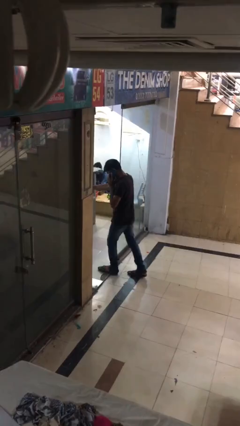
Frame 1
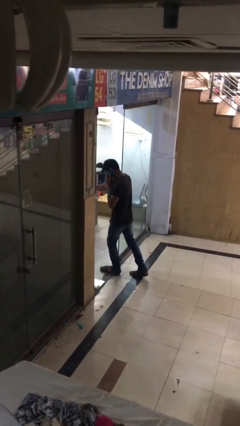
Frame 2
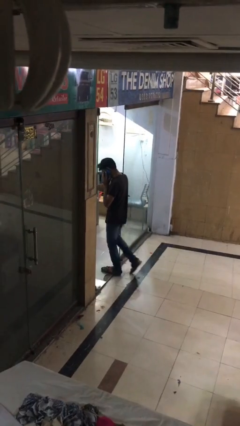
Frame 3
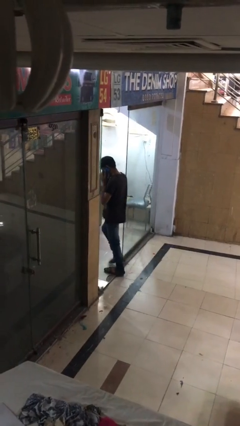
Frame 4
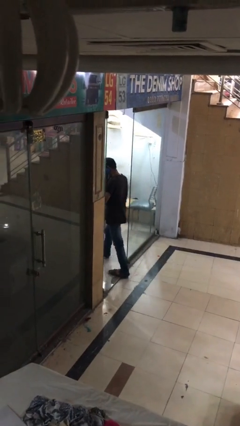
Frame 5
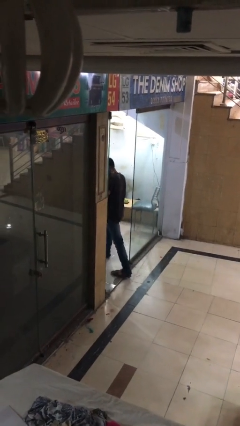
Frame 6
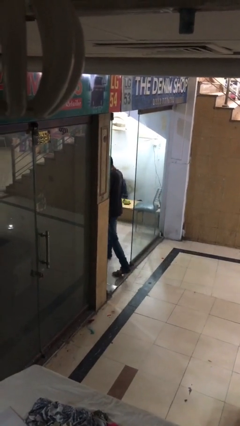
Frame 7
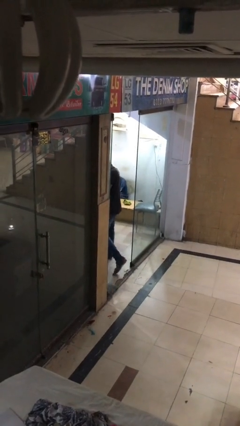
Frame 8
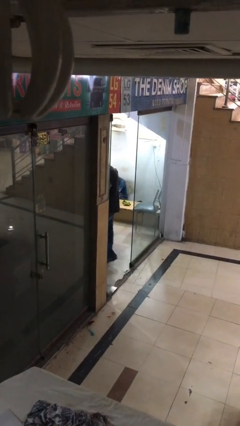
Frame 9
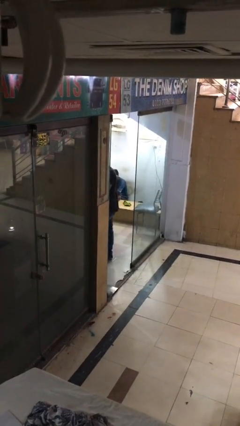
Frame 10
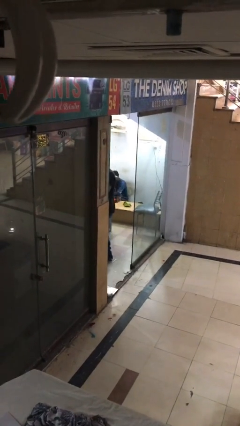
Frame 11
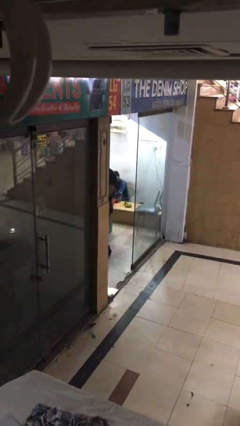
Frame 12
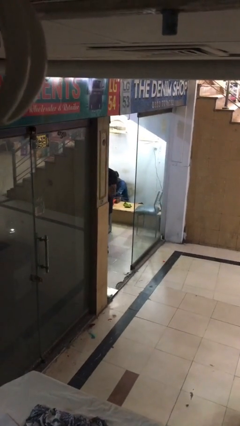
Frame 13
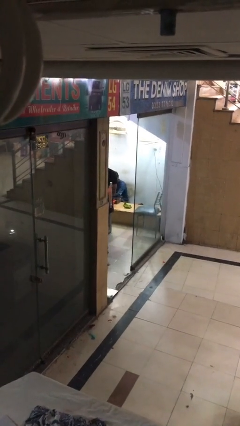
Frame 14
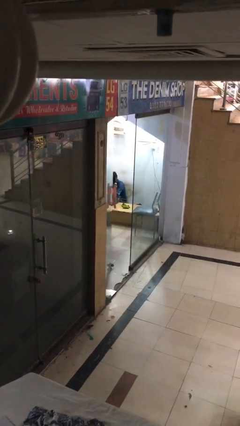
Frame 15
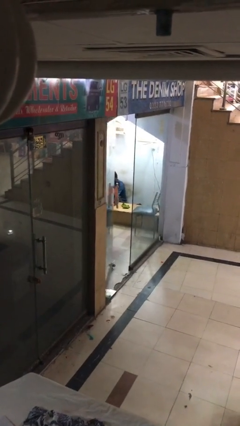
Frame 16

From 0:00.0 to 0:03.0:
person exits scene through structure

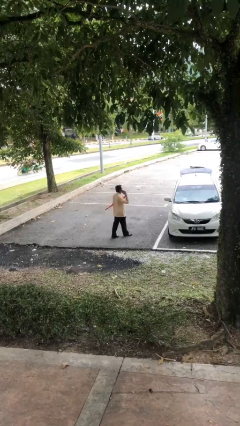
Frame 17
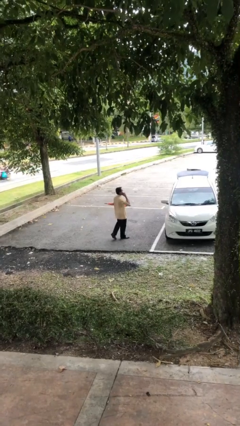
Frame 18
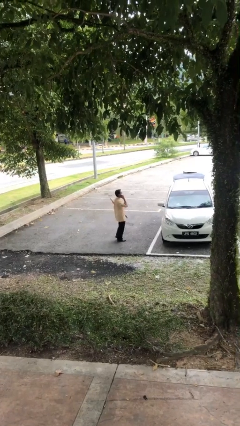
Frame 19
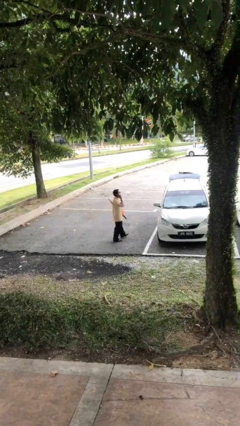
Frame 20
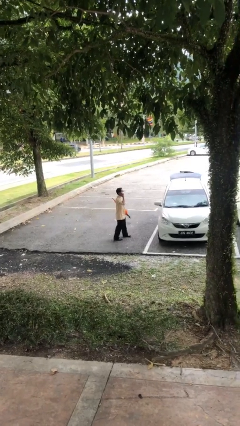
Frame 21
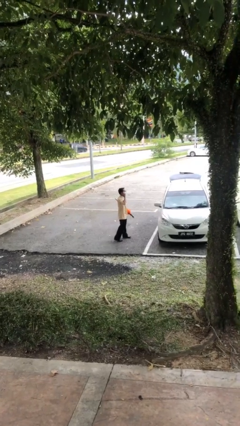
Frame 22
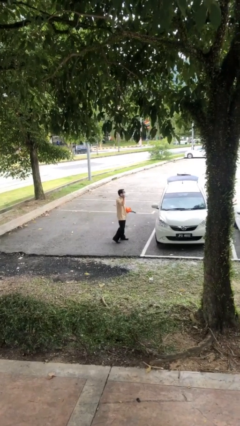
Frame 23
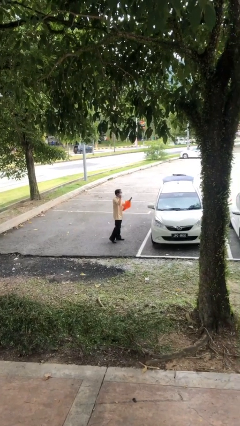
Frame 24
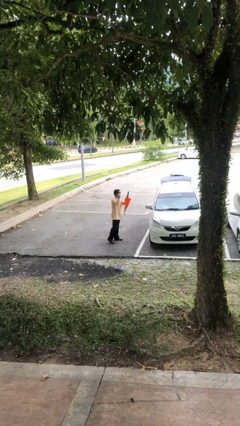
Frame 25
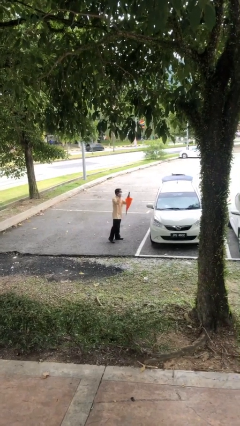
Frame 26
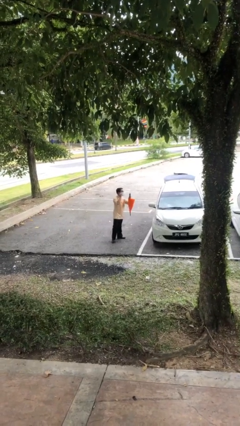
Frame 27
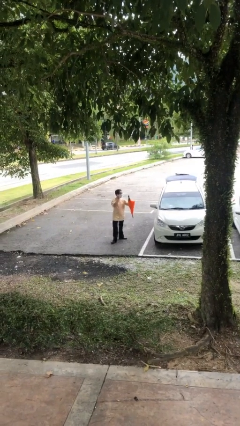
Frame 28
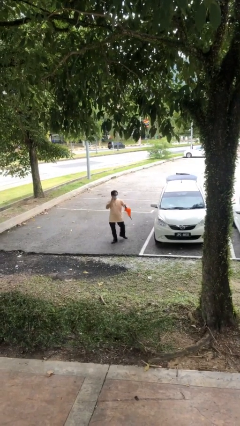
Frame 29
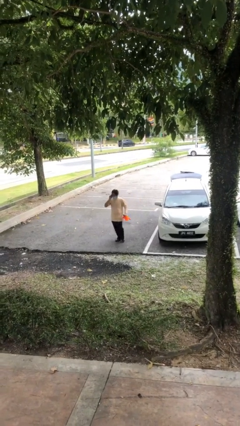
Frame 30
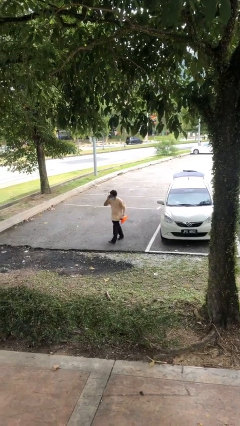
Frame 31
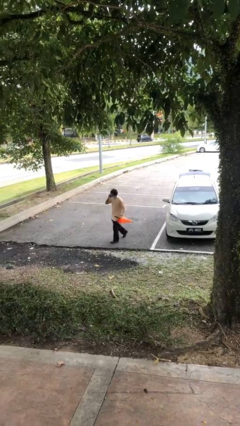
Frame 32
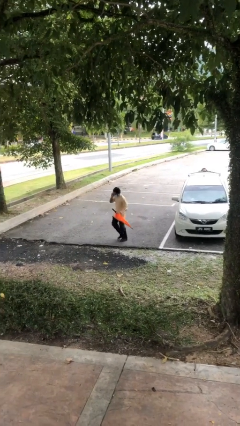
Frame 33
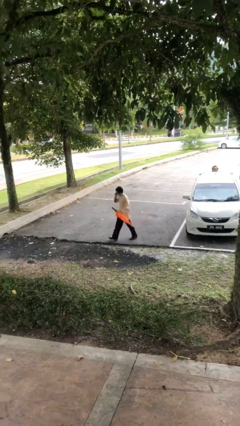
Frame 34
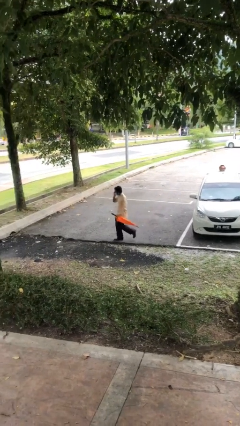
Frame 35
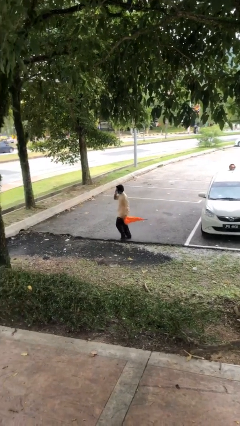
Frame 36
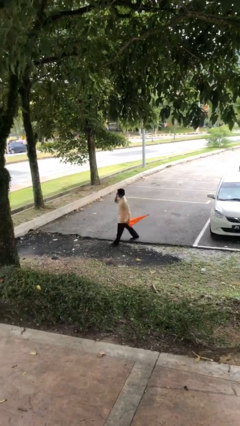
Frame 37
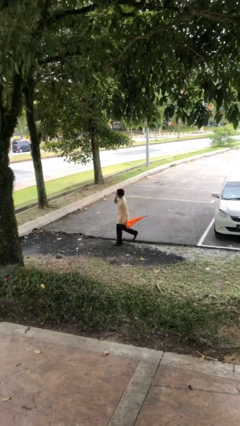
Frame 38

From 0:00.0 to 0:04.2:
person talks on phone
